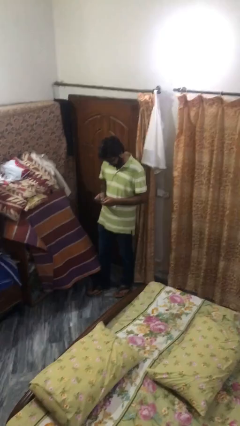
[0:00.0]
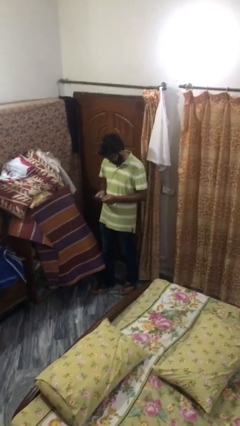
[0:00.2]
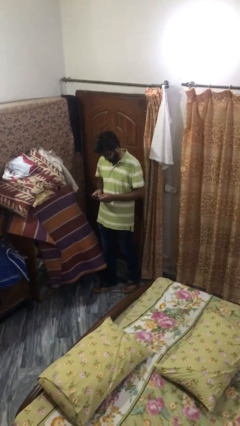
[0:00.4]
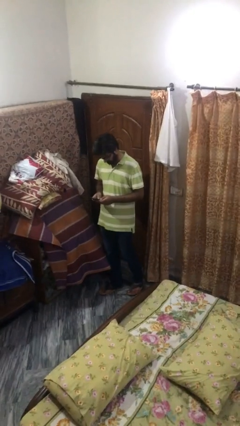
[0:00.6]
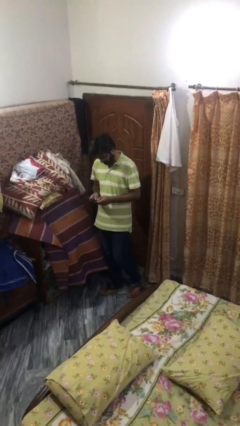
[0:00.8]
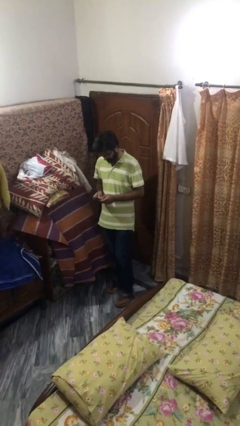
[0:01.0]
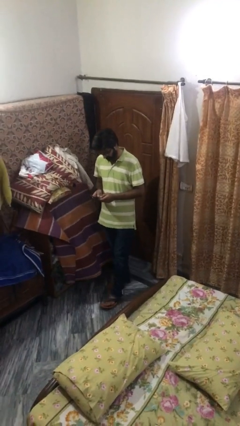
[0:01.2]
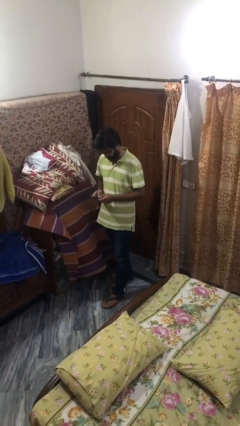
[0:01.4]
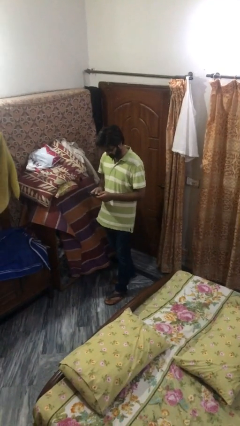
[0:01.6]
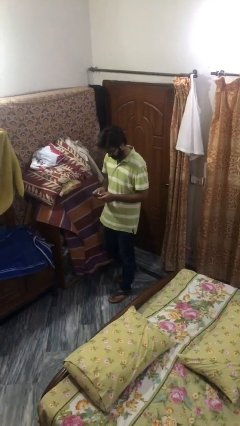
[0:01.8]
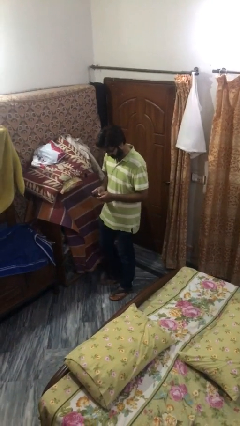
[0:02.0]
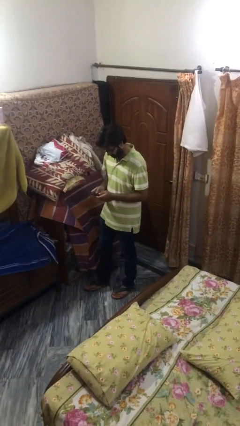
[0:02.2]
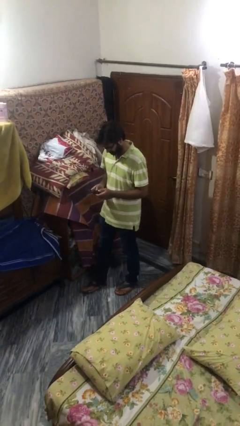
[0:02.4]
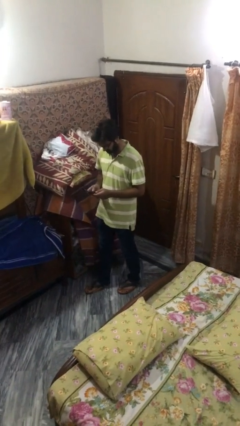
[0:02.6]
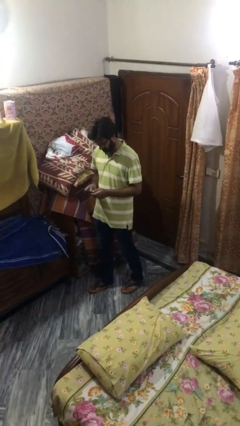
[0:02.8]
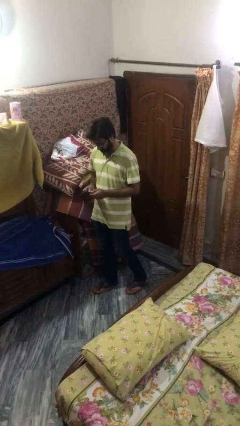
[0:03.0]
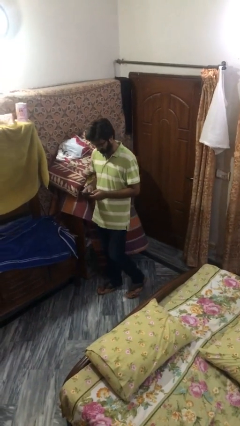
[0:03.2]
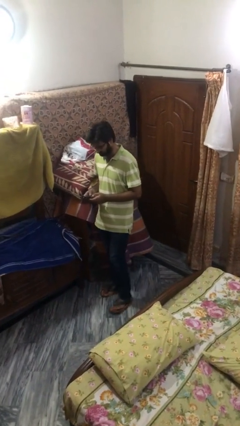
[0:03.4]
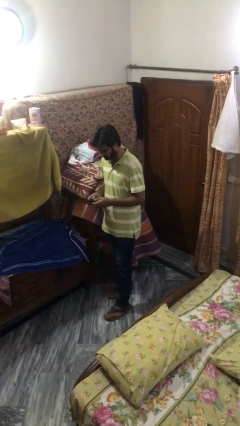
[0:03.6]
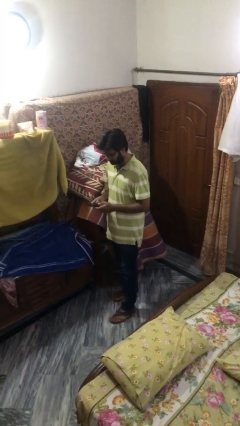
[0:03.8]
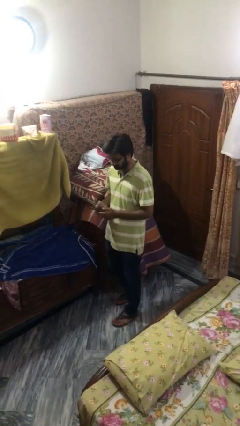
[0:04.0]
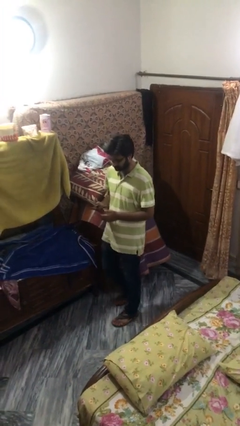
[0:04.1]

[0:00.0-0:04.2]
person texts on phone

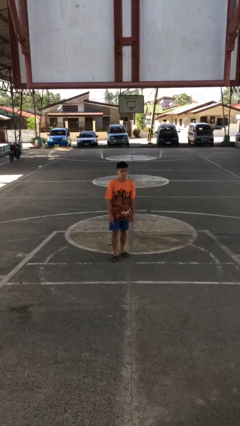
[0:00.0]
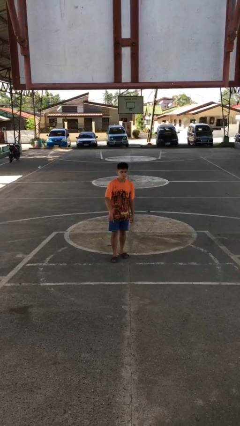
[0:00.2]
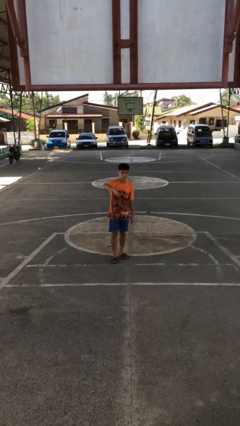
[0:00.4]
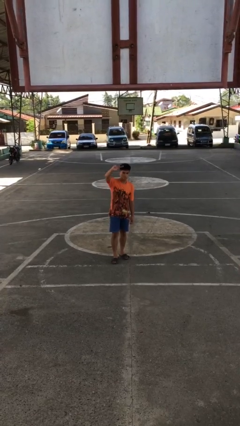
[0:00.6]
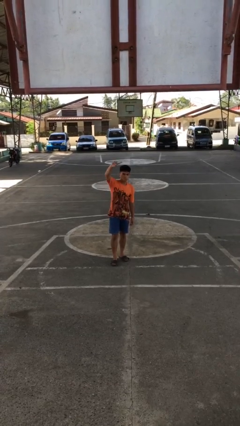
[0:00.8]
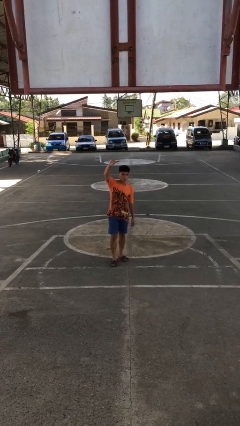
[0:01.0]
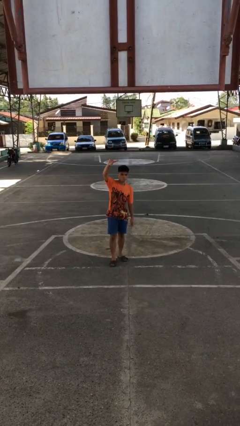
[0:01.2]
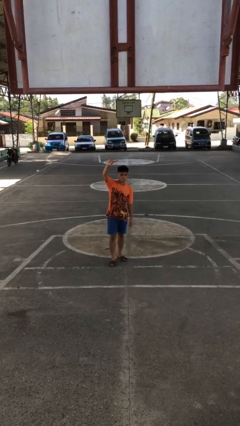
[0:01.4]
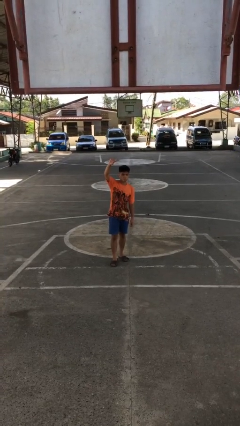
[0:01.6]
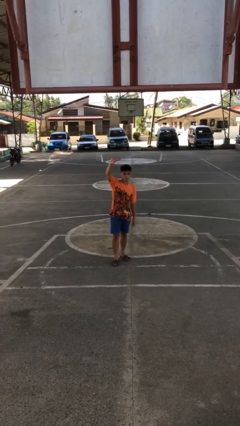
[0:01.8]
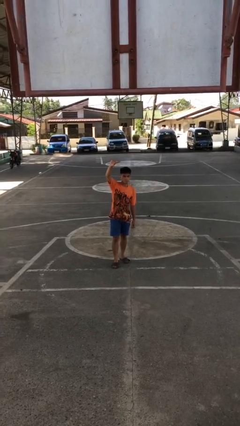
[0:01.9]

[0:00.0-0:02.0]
person gestures swipe up

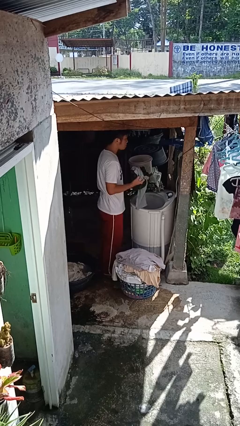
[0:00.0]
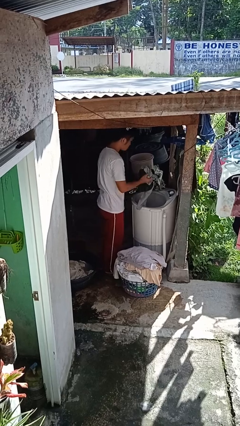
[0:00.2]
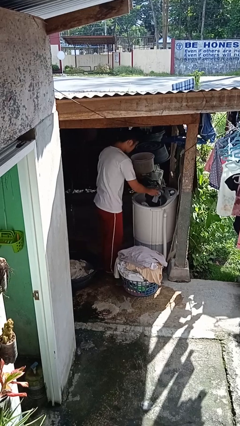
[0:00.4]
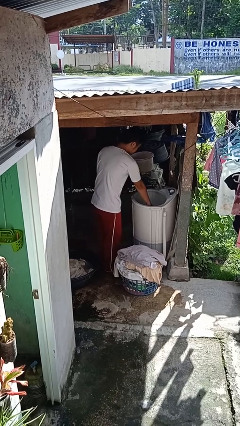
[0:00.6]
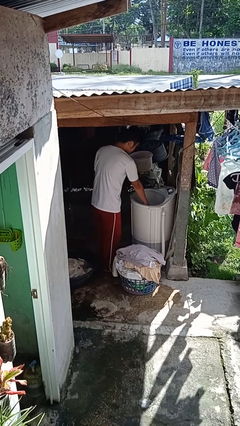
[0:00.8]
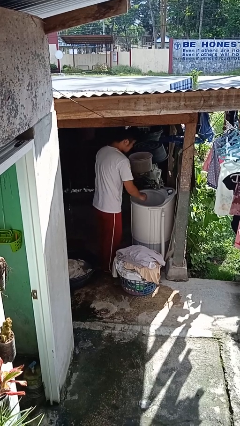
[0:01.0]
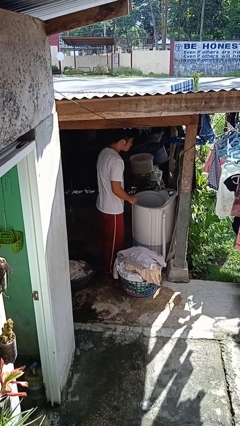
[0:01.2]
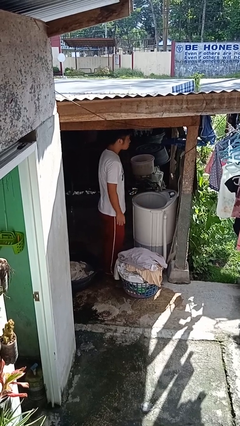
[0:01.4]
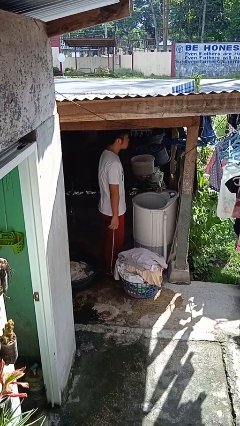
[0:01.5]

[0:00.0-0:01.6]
person loads clotheswasher

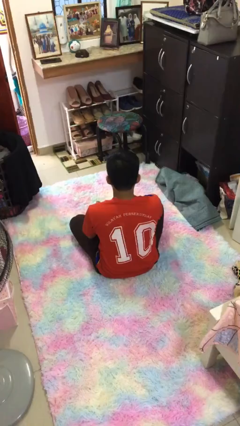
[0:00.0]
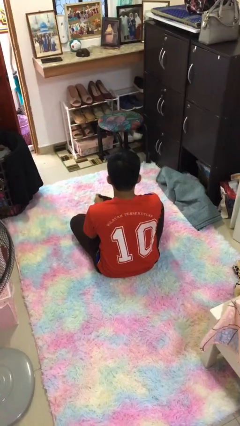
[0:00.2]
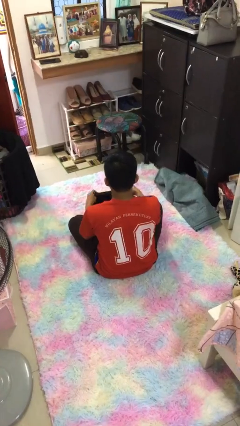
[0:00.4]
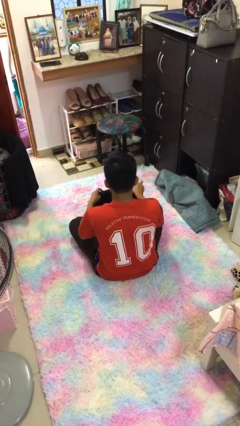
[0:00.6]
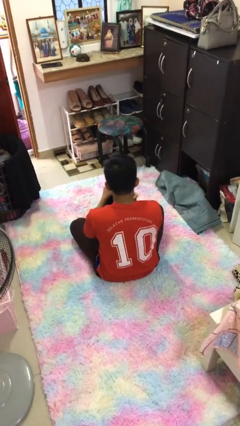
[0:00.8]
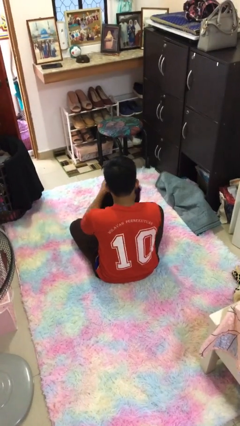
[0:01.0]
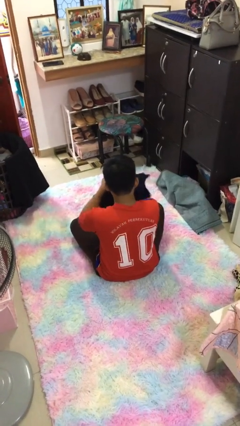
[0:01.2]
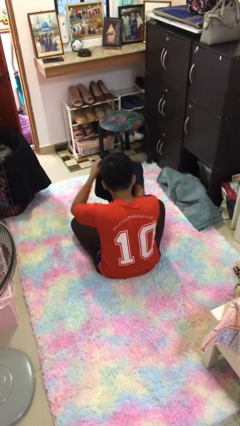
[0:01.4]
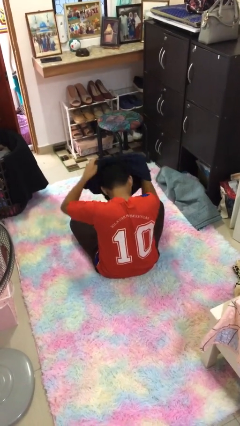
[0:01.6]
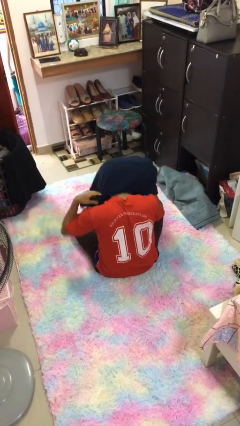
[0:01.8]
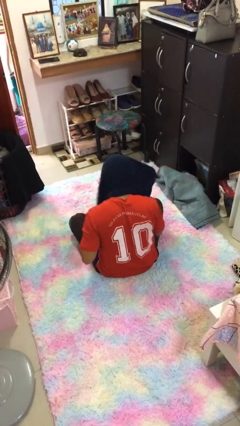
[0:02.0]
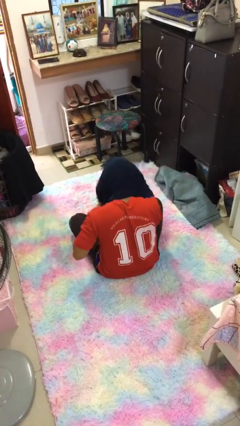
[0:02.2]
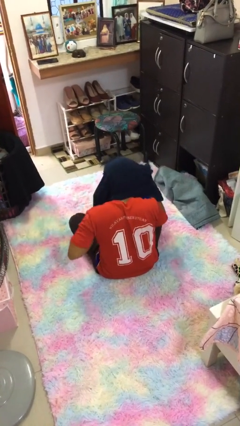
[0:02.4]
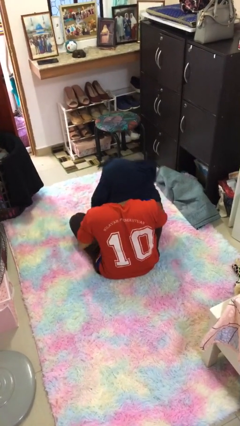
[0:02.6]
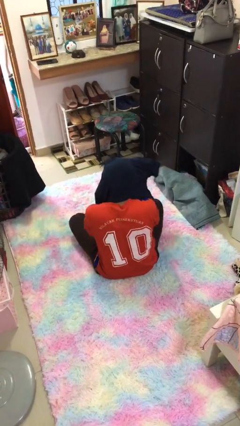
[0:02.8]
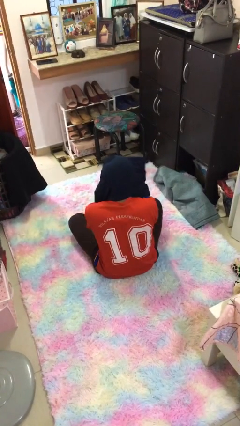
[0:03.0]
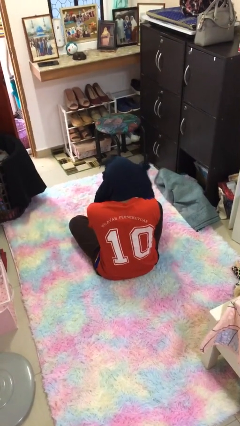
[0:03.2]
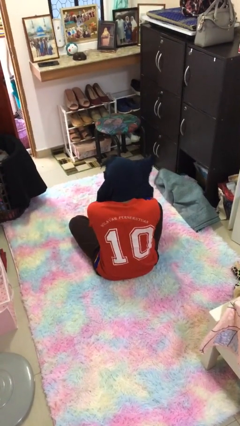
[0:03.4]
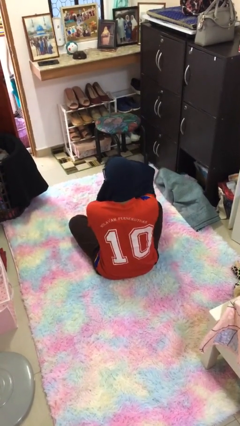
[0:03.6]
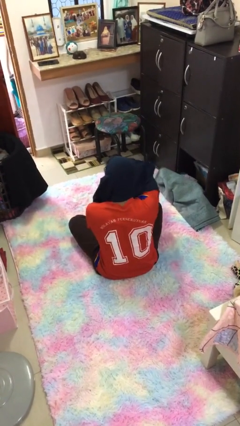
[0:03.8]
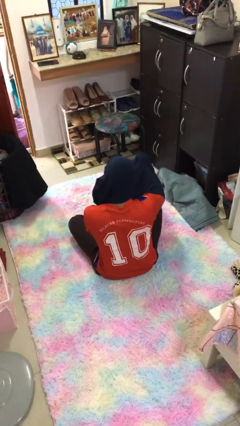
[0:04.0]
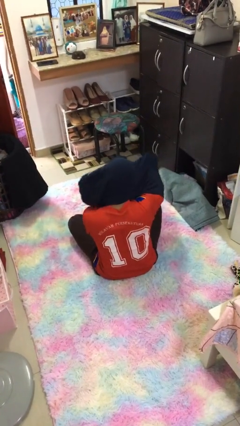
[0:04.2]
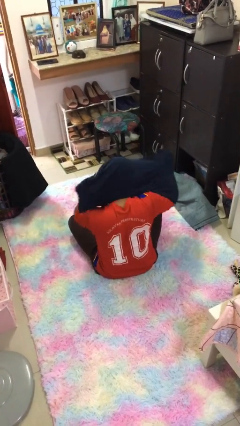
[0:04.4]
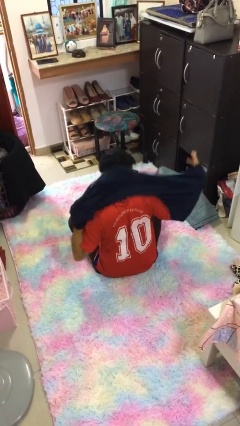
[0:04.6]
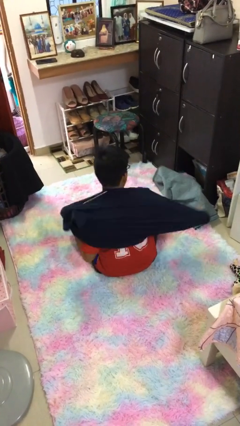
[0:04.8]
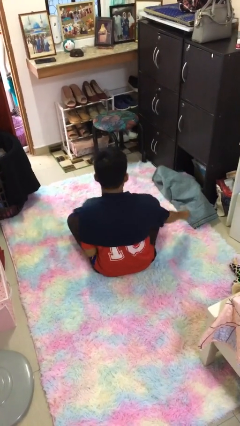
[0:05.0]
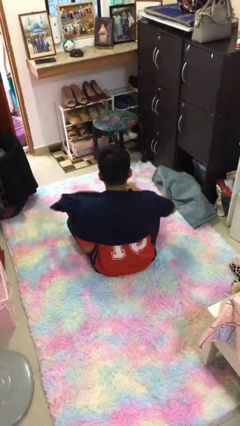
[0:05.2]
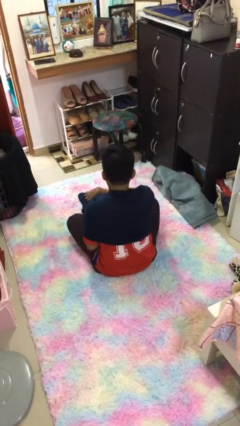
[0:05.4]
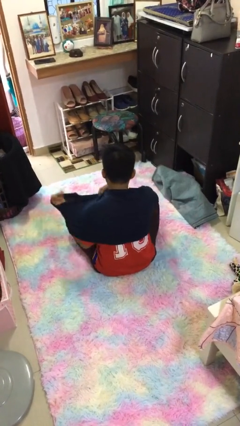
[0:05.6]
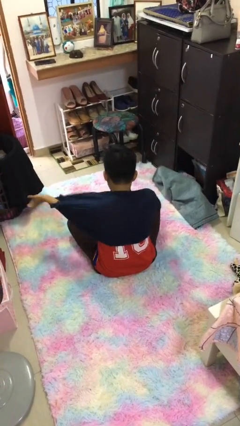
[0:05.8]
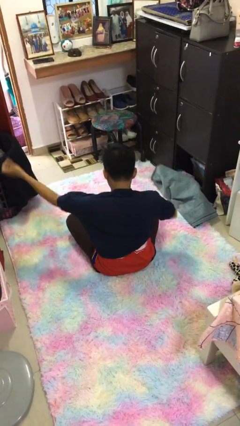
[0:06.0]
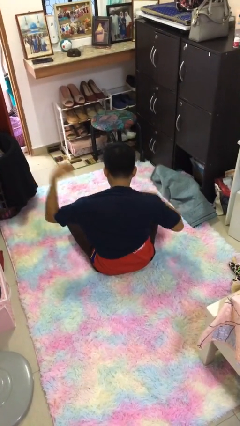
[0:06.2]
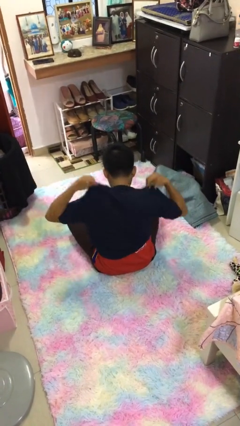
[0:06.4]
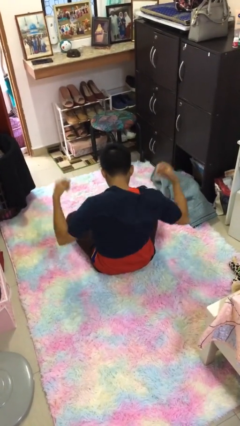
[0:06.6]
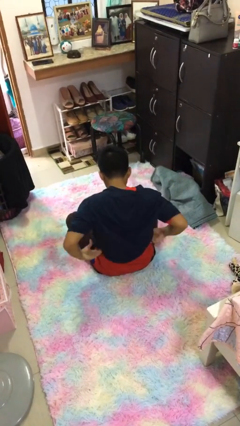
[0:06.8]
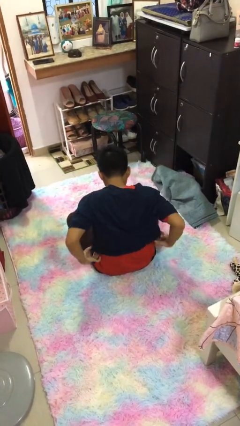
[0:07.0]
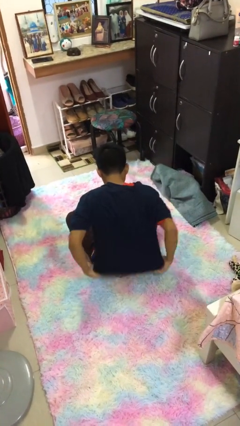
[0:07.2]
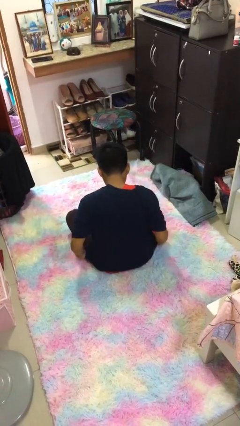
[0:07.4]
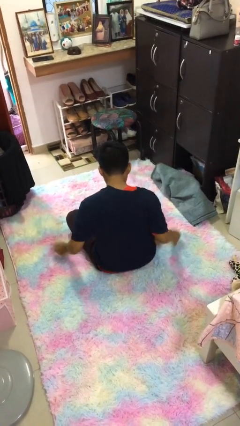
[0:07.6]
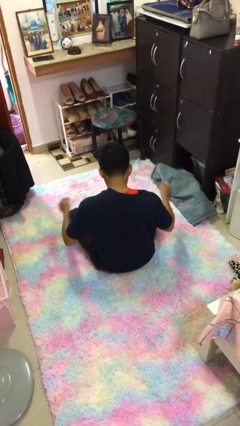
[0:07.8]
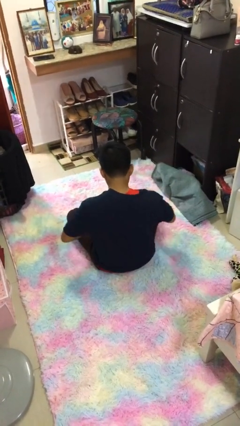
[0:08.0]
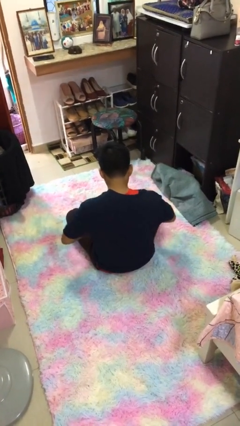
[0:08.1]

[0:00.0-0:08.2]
person puts on shirt

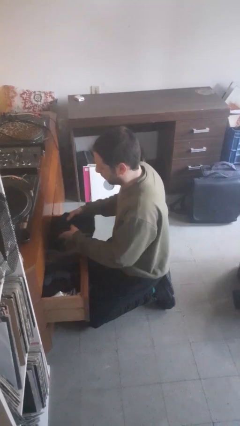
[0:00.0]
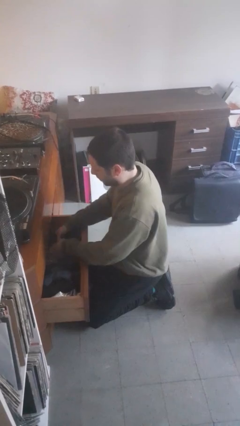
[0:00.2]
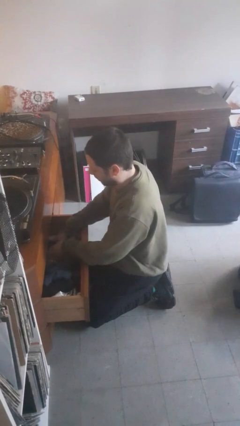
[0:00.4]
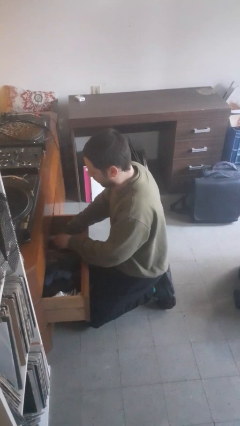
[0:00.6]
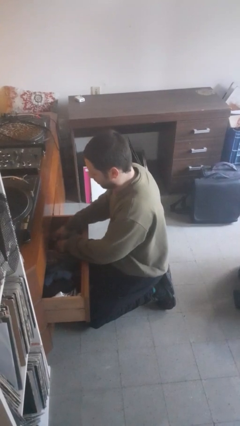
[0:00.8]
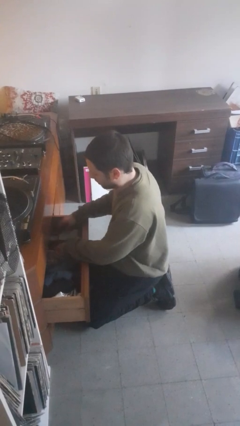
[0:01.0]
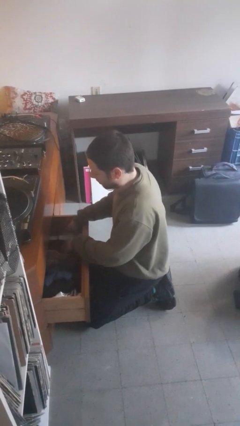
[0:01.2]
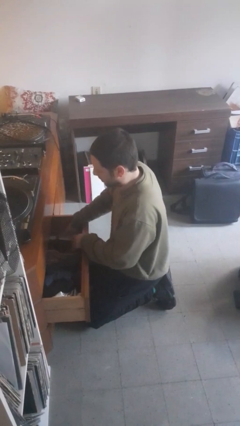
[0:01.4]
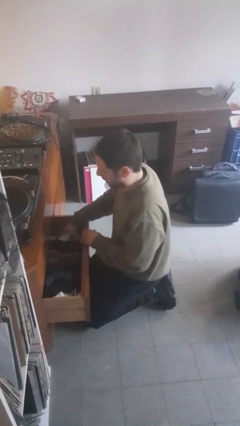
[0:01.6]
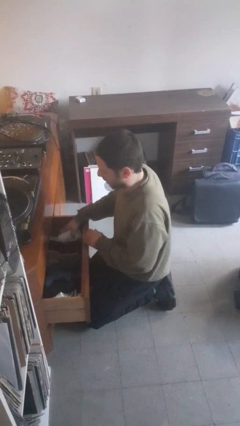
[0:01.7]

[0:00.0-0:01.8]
person puts clothes into dresser
